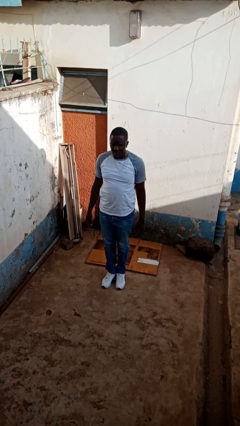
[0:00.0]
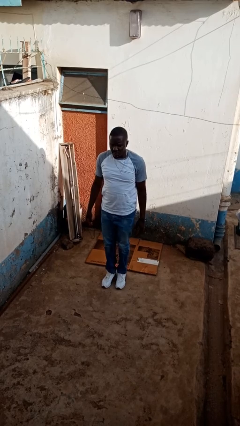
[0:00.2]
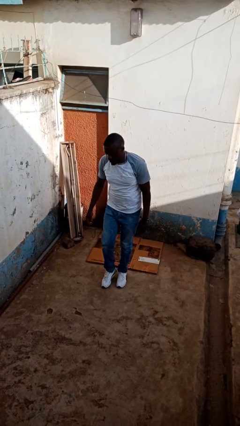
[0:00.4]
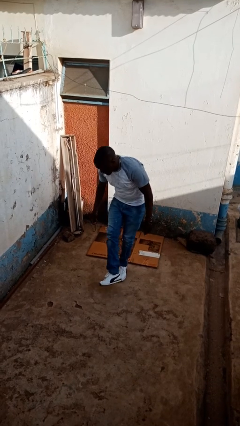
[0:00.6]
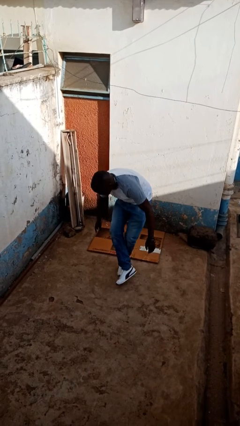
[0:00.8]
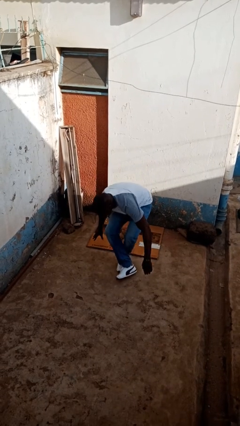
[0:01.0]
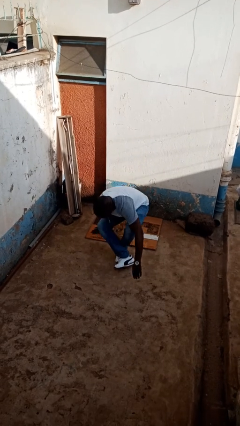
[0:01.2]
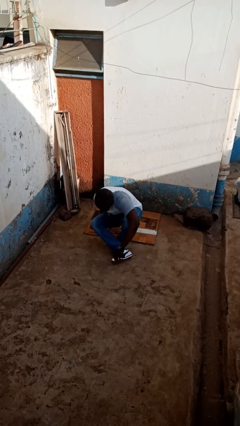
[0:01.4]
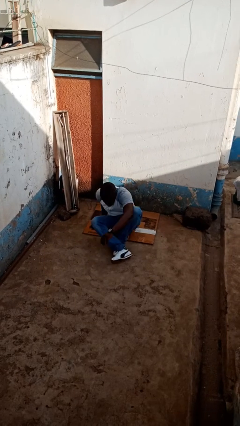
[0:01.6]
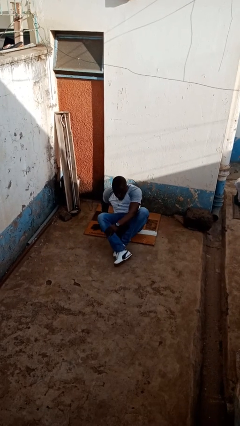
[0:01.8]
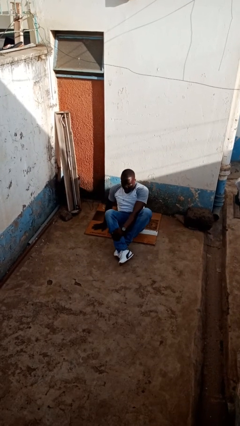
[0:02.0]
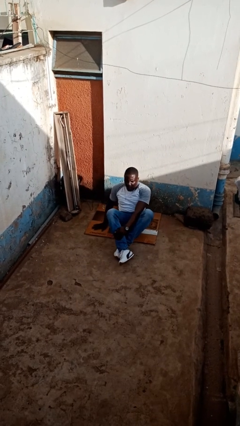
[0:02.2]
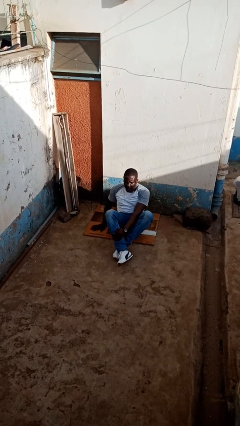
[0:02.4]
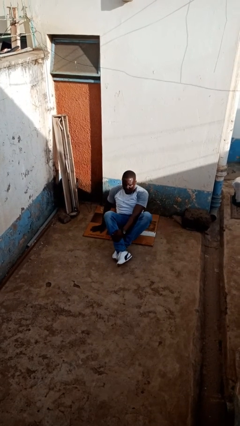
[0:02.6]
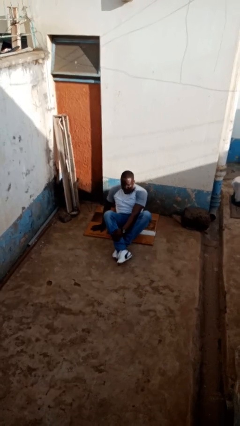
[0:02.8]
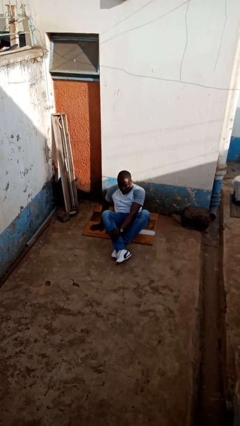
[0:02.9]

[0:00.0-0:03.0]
person sits crisscross

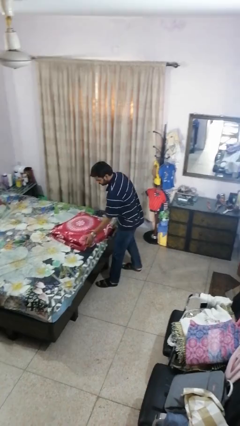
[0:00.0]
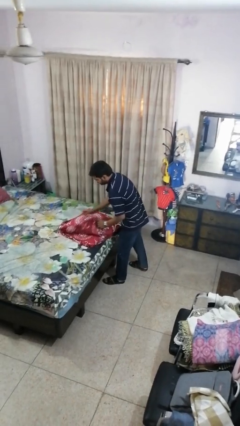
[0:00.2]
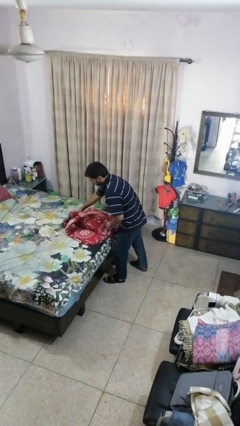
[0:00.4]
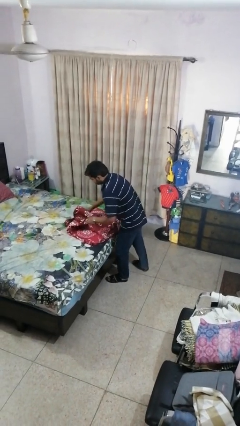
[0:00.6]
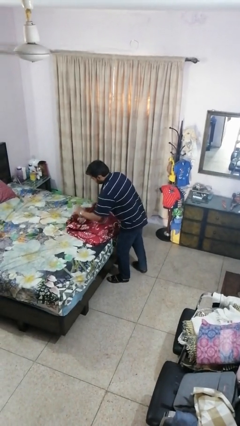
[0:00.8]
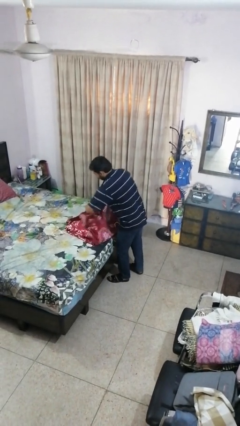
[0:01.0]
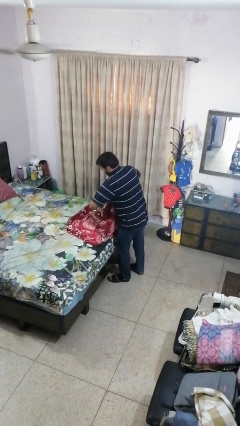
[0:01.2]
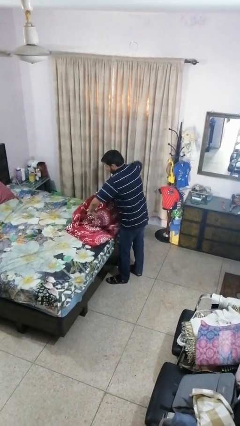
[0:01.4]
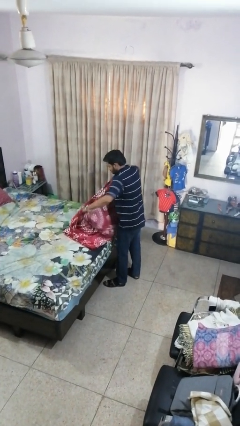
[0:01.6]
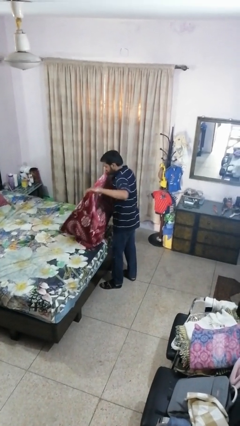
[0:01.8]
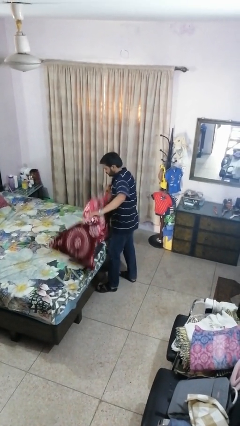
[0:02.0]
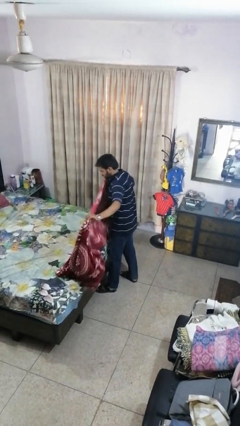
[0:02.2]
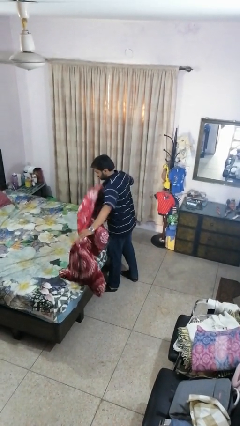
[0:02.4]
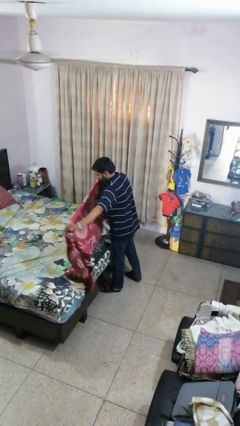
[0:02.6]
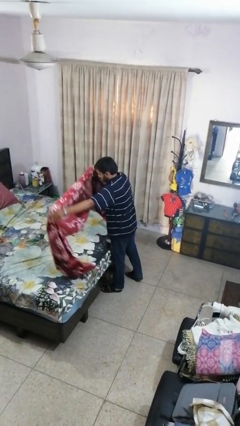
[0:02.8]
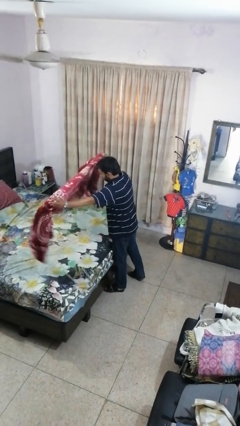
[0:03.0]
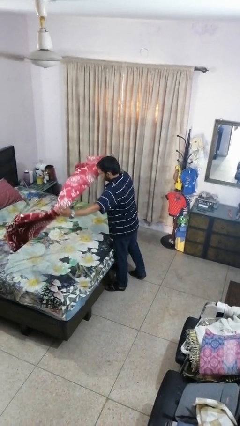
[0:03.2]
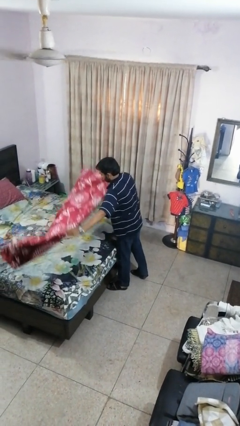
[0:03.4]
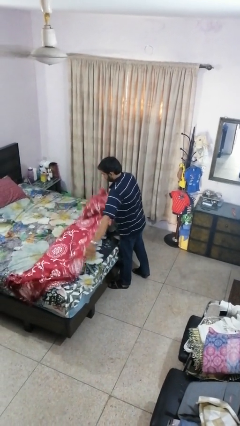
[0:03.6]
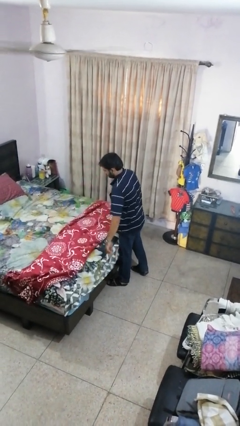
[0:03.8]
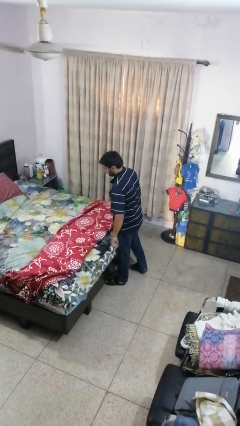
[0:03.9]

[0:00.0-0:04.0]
person crumples paper

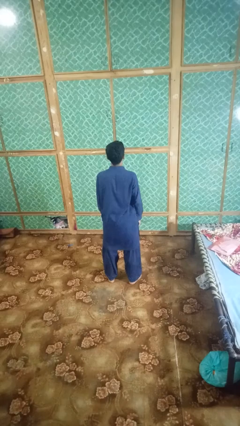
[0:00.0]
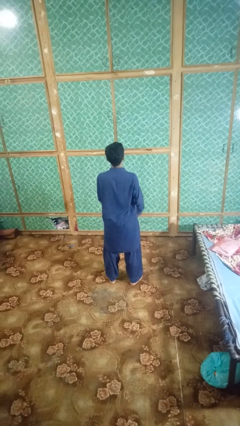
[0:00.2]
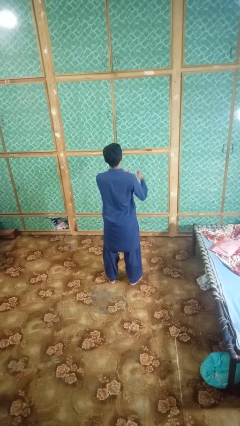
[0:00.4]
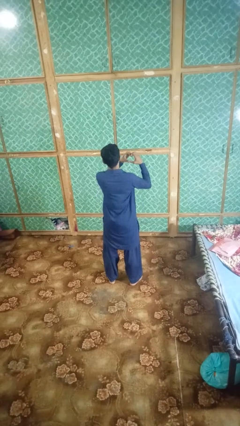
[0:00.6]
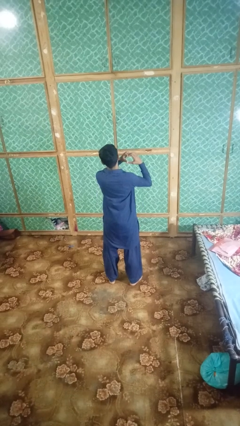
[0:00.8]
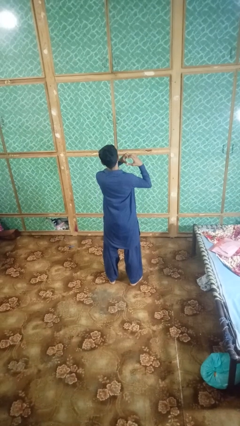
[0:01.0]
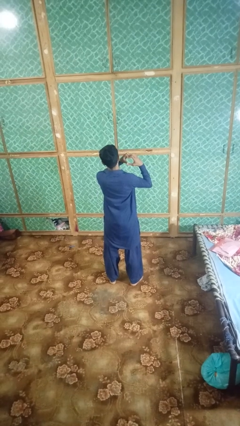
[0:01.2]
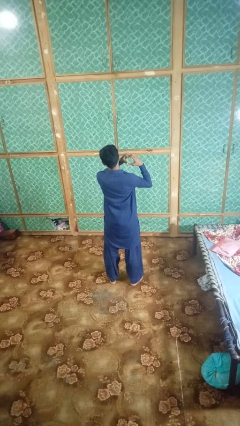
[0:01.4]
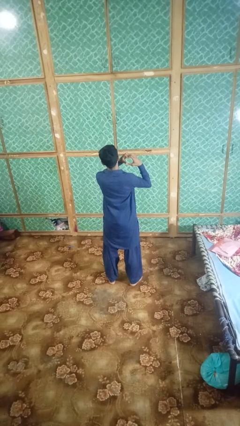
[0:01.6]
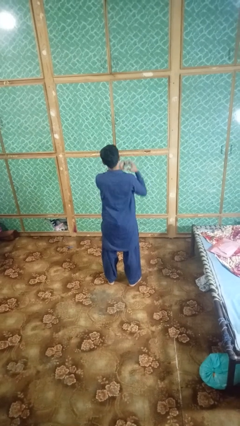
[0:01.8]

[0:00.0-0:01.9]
person gestures heart

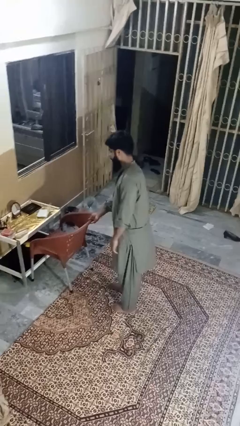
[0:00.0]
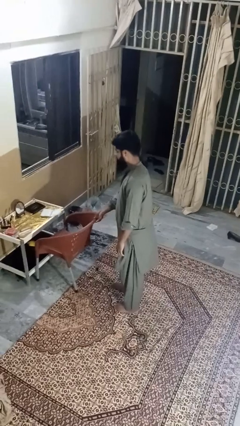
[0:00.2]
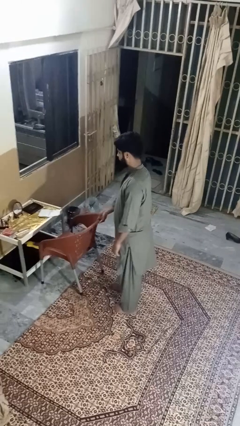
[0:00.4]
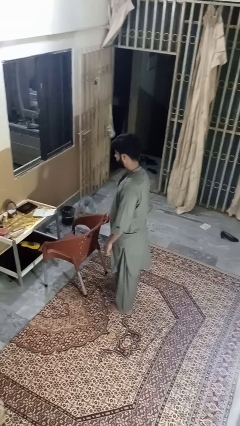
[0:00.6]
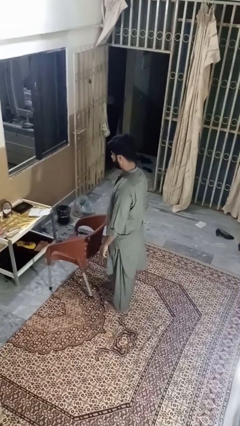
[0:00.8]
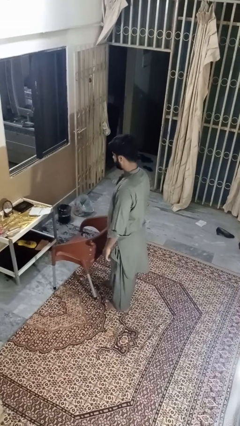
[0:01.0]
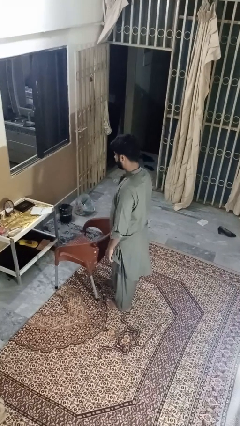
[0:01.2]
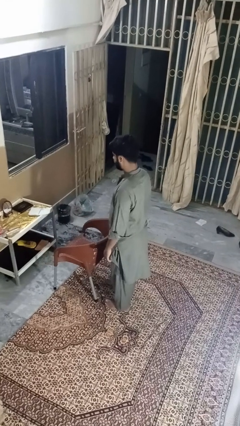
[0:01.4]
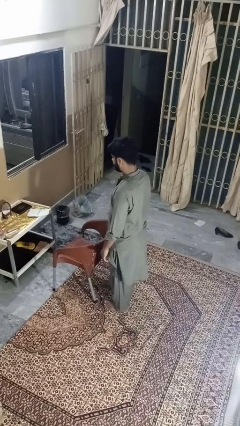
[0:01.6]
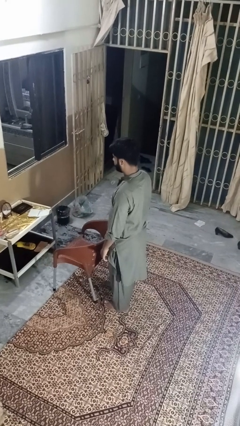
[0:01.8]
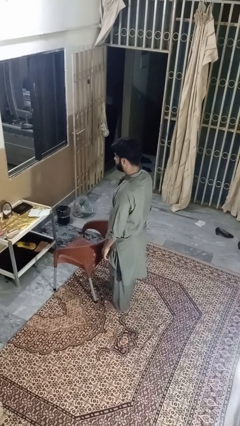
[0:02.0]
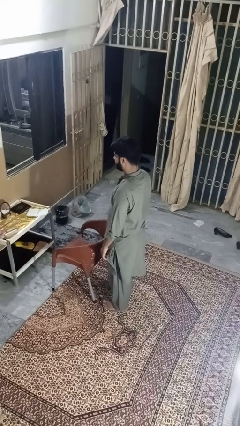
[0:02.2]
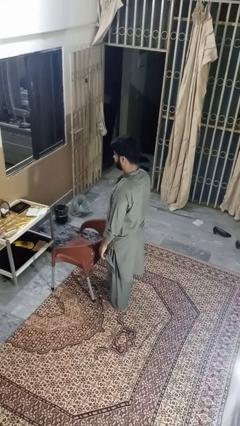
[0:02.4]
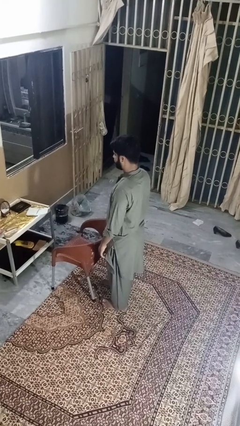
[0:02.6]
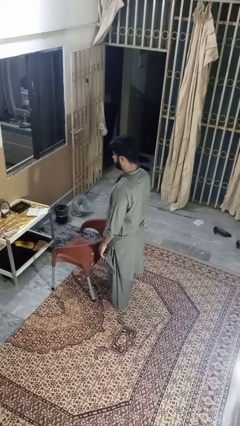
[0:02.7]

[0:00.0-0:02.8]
person pulls out chair

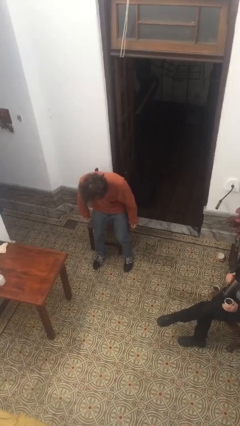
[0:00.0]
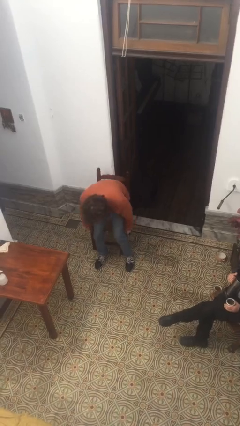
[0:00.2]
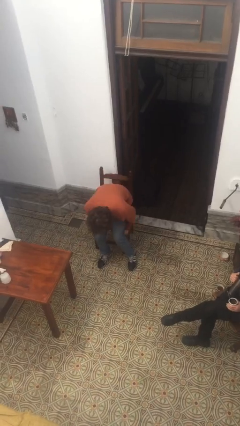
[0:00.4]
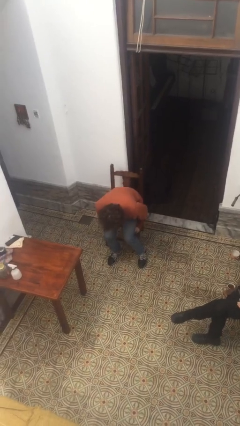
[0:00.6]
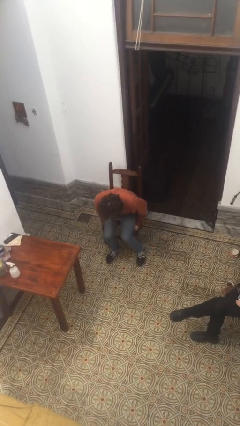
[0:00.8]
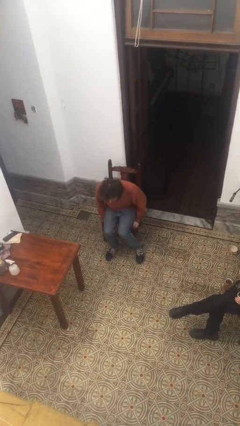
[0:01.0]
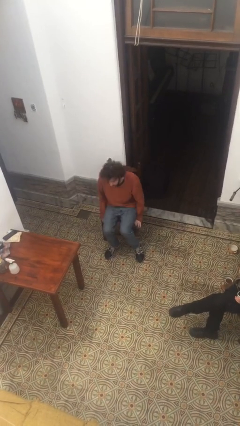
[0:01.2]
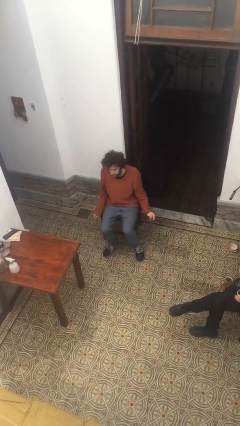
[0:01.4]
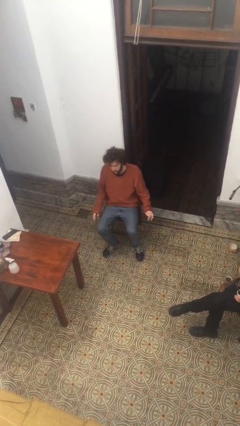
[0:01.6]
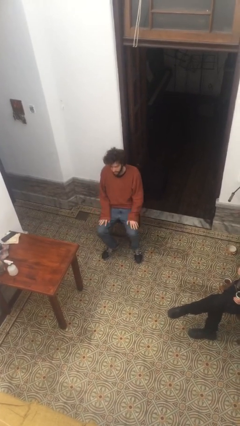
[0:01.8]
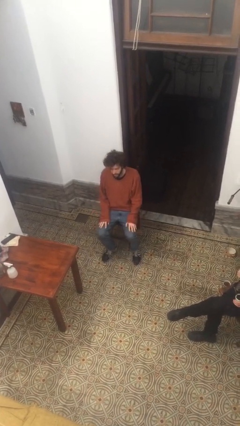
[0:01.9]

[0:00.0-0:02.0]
person sits down

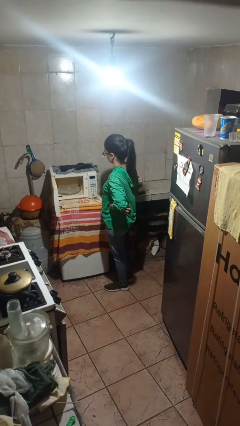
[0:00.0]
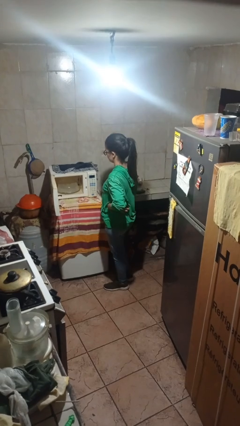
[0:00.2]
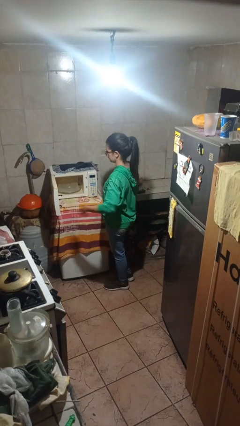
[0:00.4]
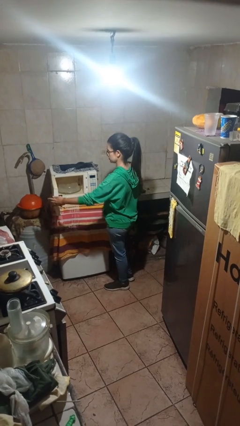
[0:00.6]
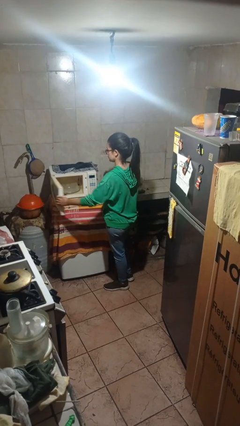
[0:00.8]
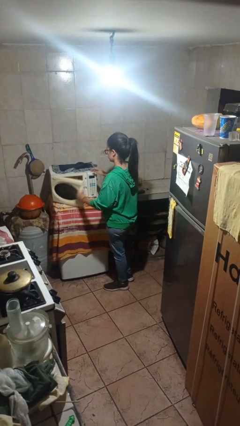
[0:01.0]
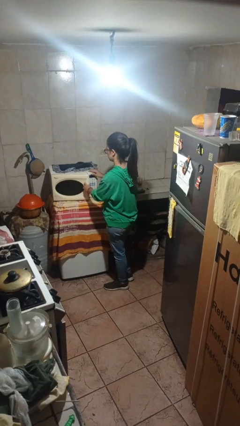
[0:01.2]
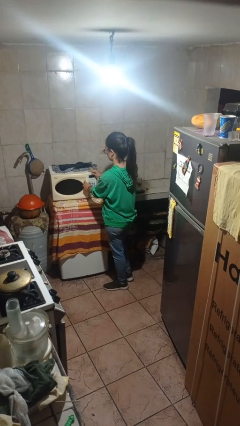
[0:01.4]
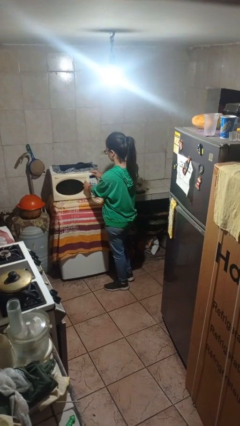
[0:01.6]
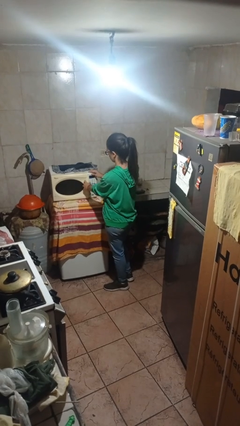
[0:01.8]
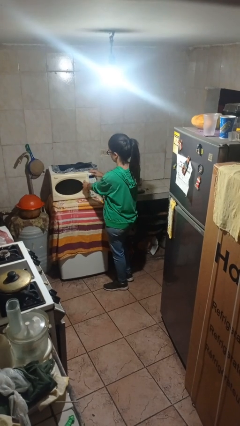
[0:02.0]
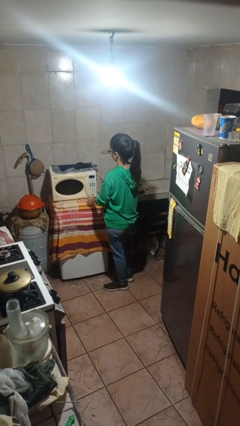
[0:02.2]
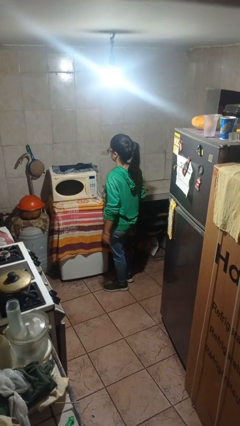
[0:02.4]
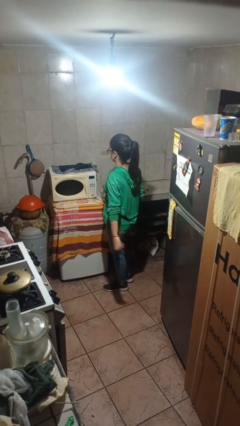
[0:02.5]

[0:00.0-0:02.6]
person closes microwave

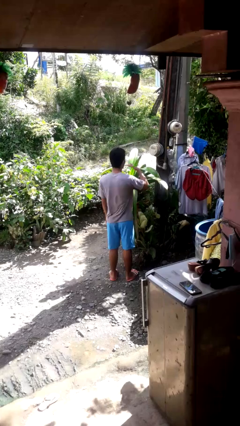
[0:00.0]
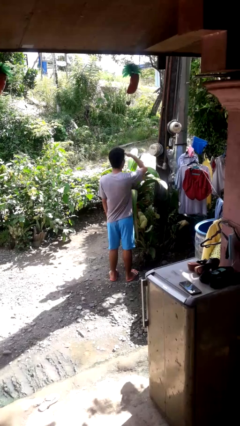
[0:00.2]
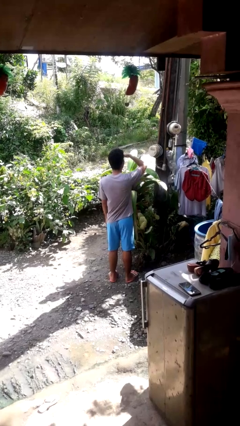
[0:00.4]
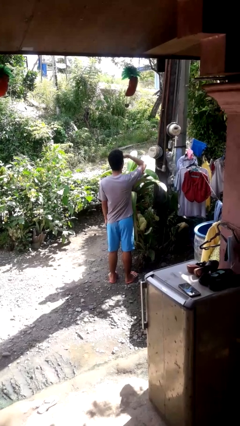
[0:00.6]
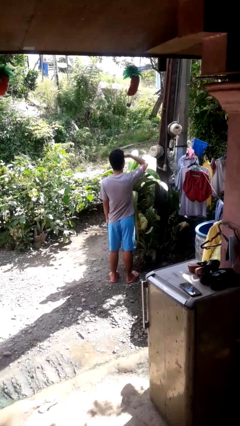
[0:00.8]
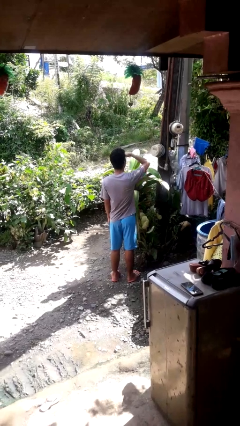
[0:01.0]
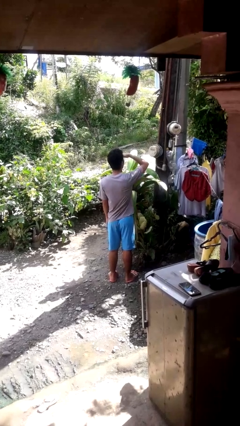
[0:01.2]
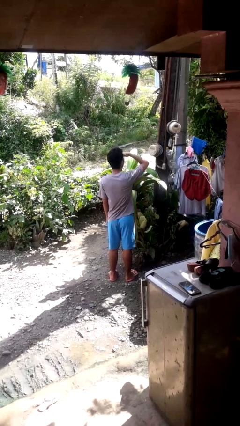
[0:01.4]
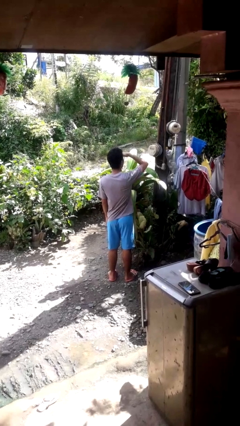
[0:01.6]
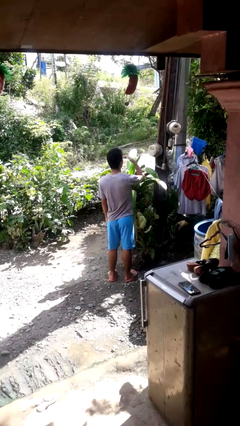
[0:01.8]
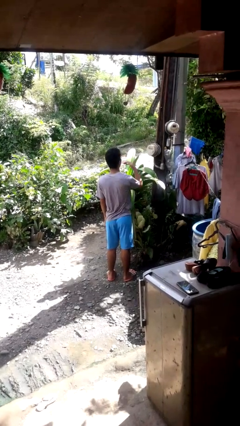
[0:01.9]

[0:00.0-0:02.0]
person shades eyes
